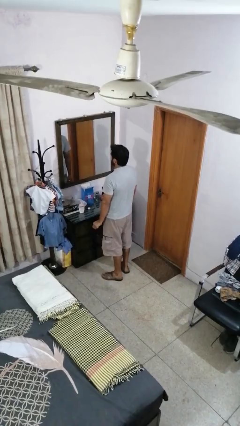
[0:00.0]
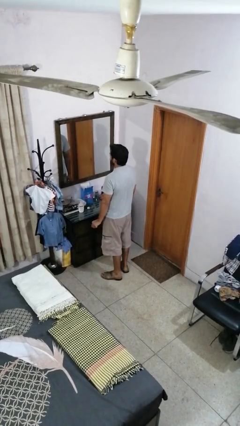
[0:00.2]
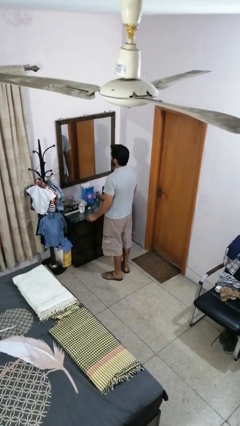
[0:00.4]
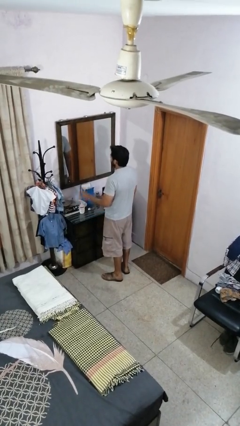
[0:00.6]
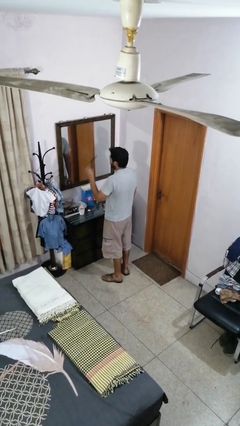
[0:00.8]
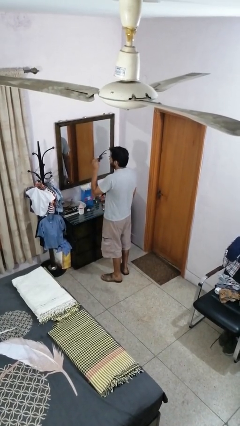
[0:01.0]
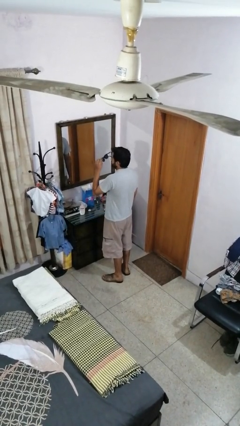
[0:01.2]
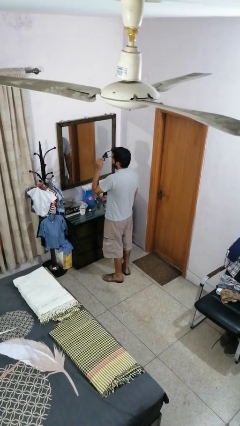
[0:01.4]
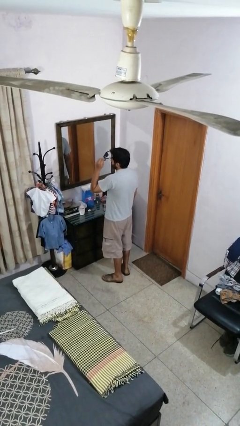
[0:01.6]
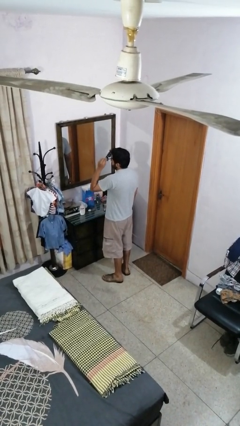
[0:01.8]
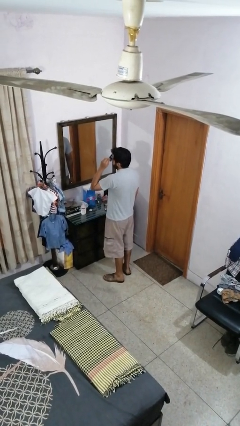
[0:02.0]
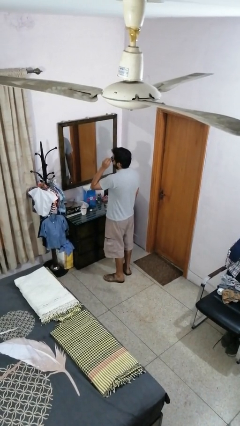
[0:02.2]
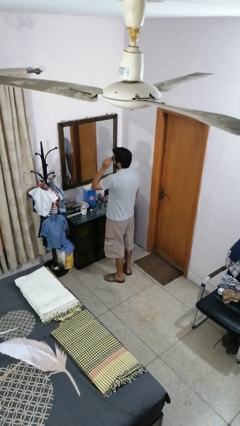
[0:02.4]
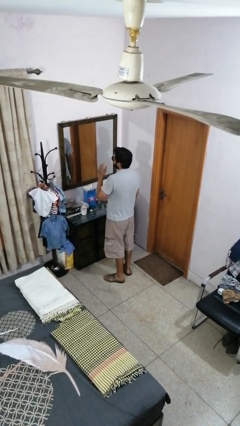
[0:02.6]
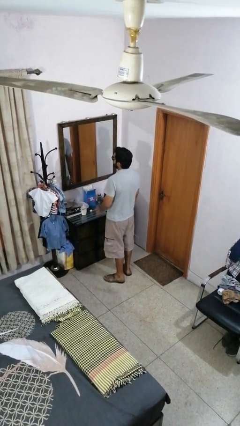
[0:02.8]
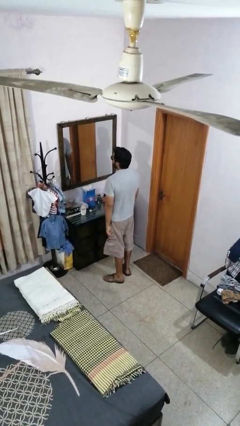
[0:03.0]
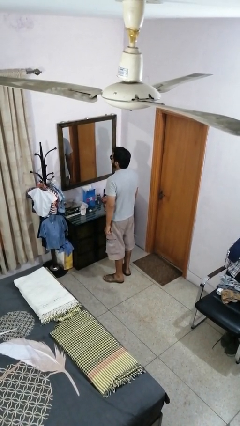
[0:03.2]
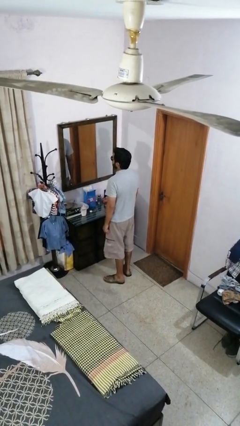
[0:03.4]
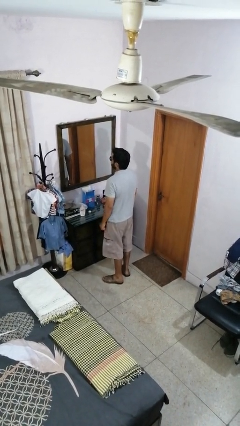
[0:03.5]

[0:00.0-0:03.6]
person puts on sunglasses

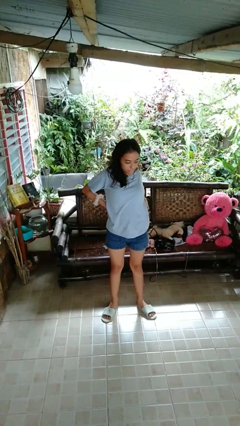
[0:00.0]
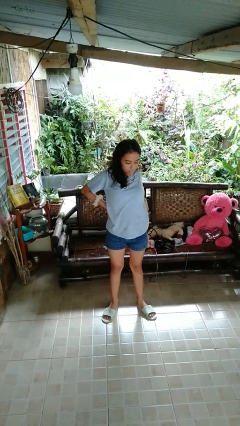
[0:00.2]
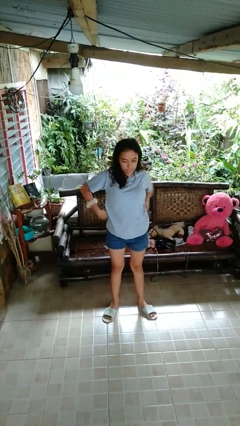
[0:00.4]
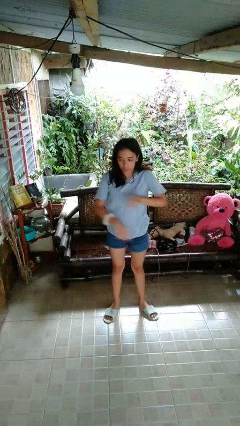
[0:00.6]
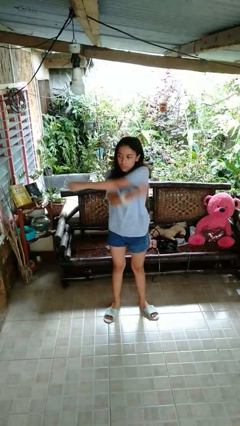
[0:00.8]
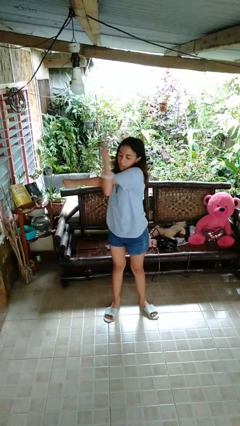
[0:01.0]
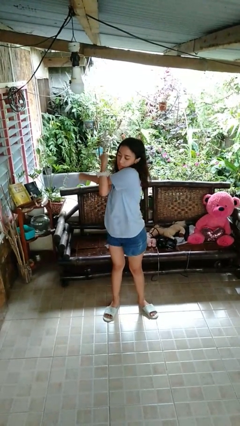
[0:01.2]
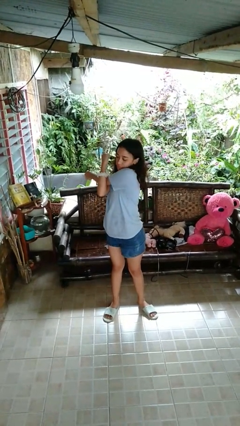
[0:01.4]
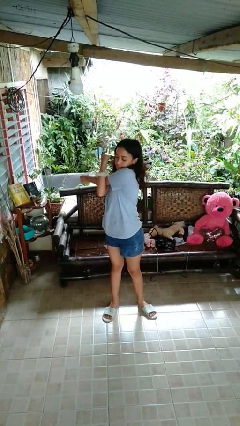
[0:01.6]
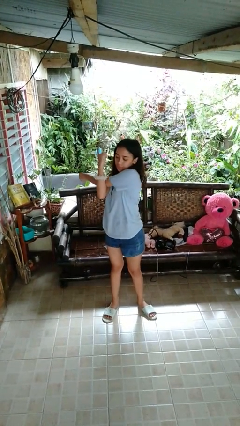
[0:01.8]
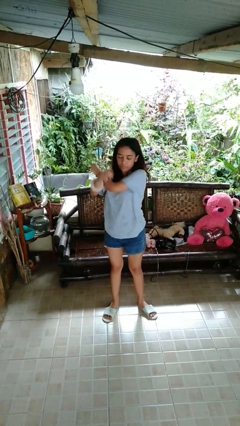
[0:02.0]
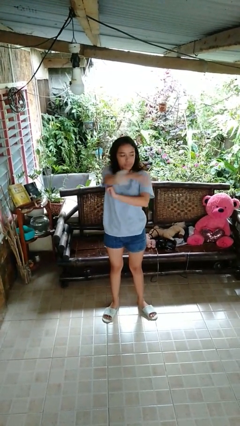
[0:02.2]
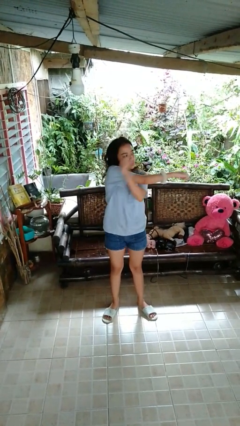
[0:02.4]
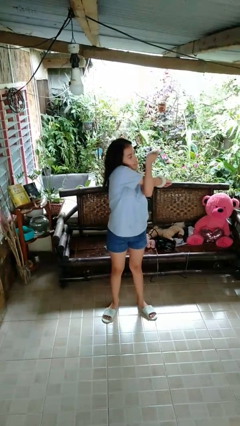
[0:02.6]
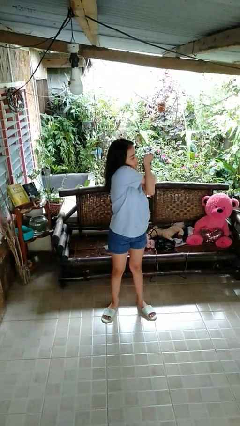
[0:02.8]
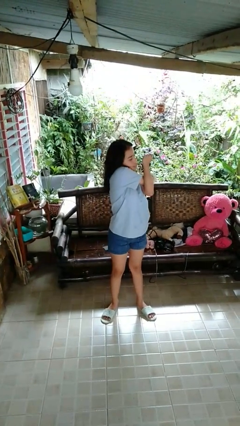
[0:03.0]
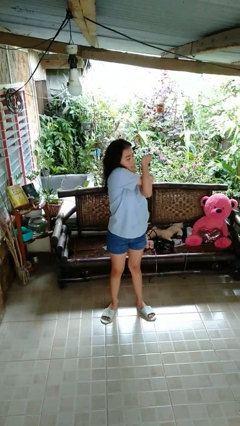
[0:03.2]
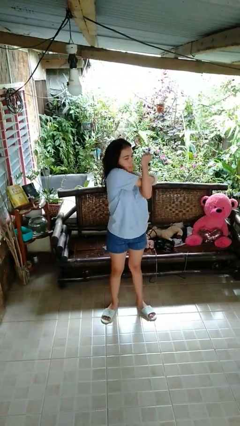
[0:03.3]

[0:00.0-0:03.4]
person stretches arms to side

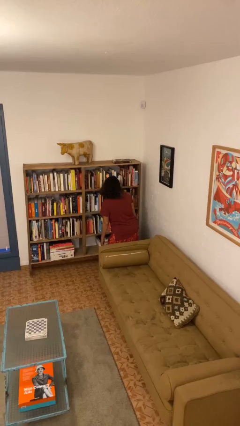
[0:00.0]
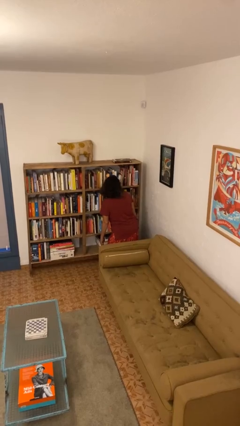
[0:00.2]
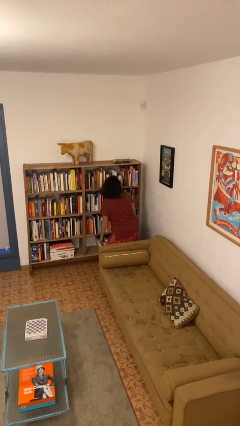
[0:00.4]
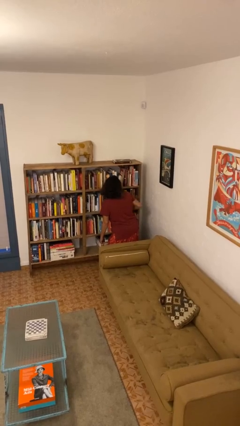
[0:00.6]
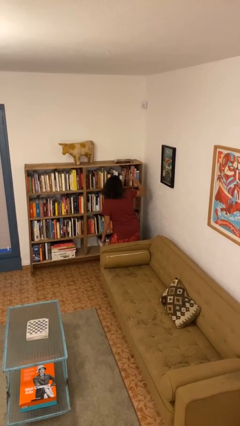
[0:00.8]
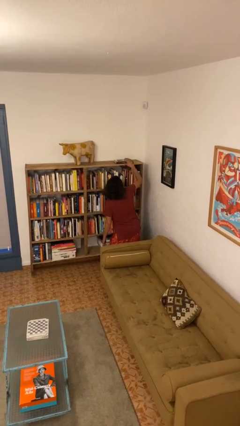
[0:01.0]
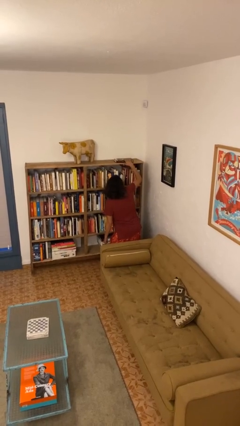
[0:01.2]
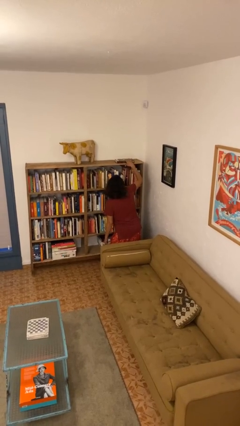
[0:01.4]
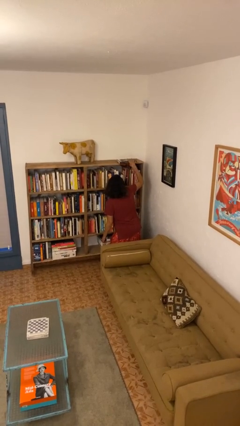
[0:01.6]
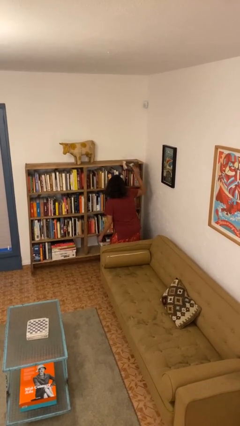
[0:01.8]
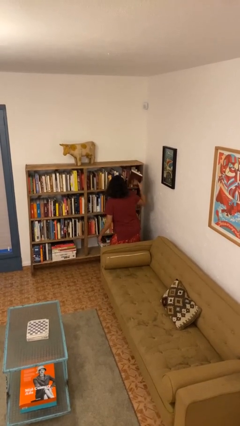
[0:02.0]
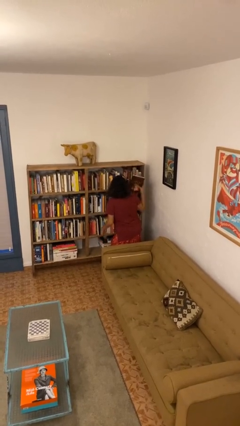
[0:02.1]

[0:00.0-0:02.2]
person picks up object from shelf

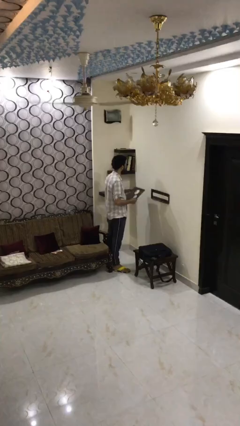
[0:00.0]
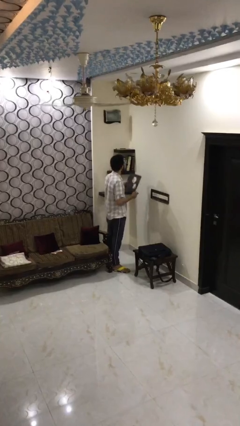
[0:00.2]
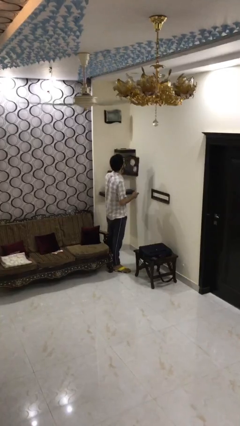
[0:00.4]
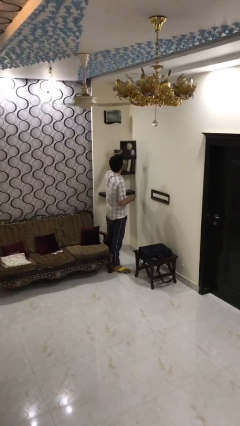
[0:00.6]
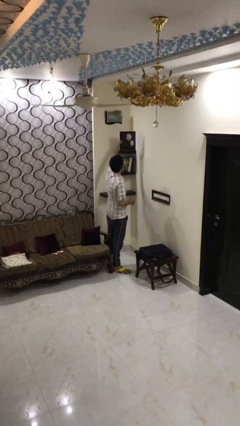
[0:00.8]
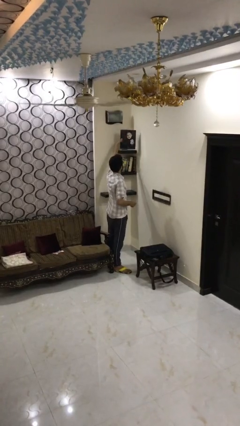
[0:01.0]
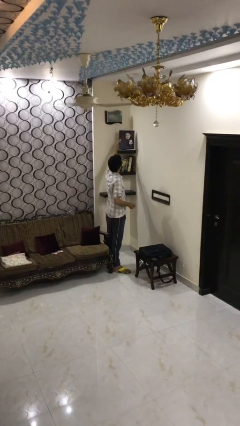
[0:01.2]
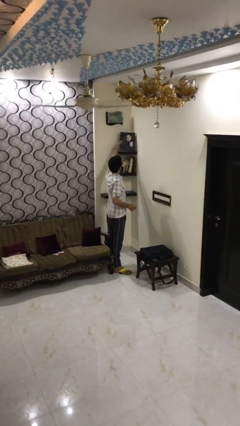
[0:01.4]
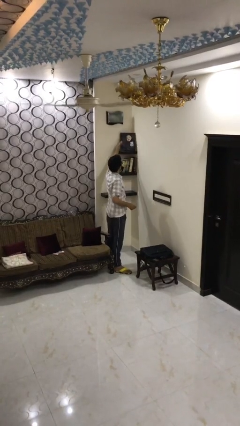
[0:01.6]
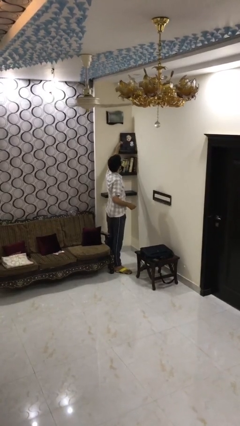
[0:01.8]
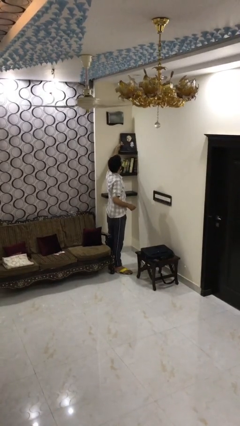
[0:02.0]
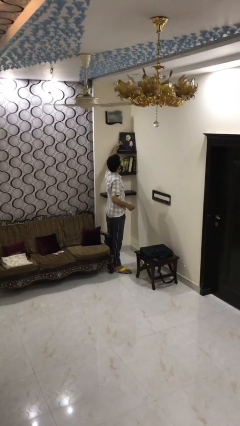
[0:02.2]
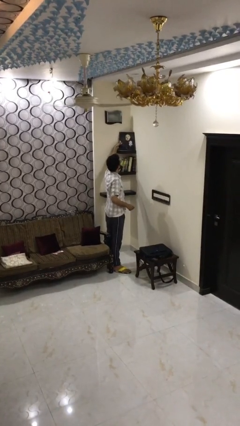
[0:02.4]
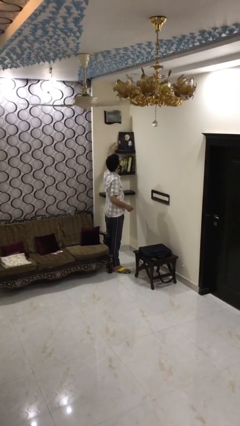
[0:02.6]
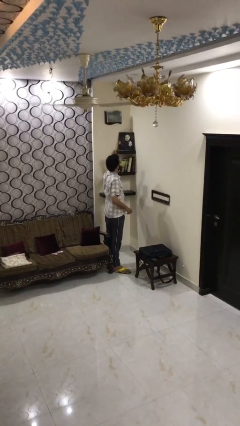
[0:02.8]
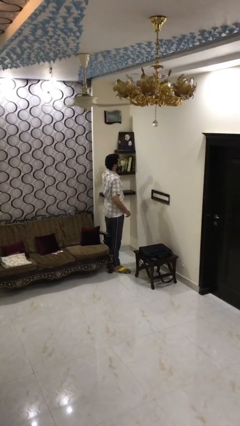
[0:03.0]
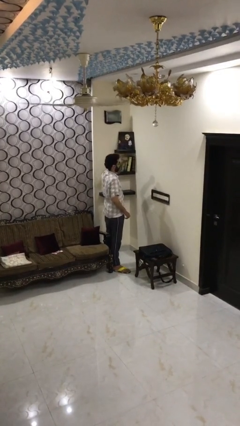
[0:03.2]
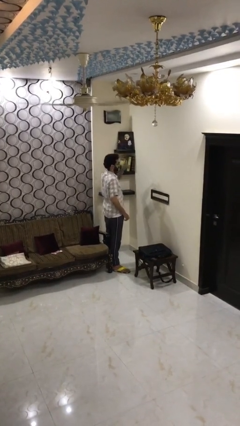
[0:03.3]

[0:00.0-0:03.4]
person puts down object on shelf

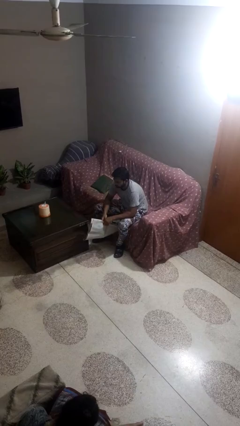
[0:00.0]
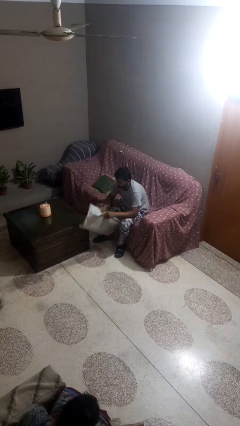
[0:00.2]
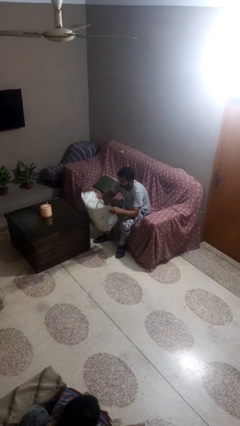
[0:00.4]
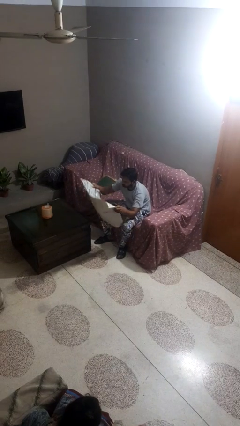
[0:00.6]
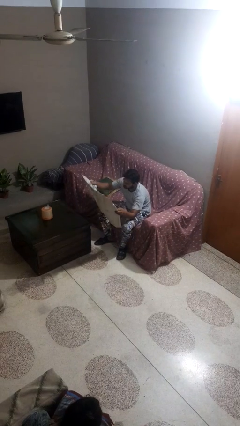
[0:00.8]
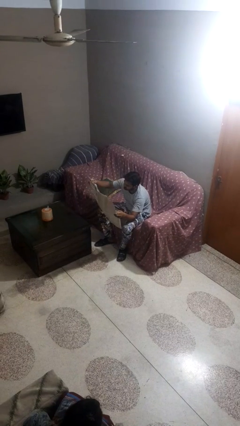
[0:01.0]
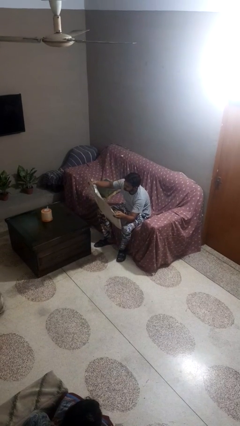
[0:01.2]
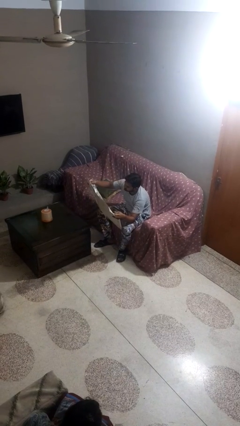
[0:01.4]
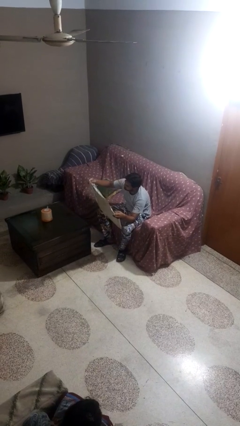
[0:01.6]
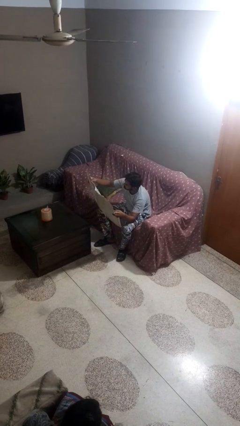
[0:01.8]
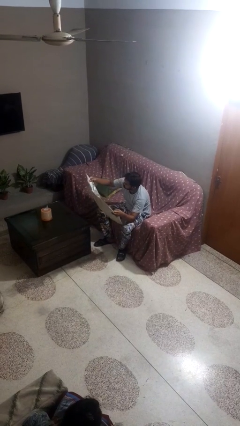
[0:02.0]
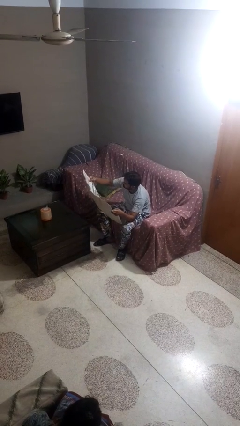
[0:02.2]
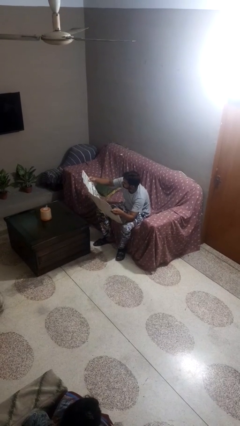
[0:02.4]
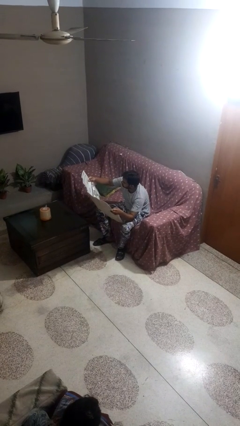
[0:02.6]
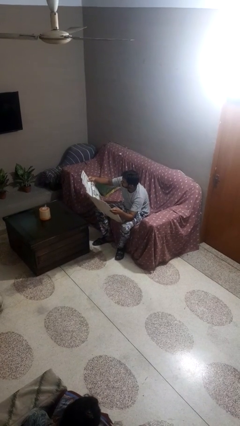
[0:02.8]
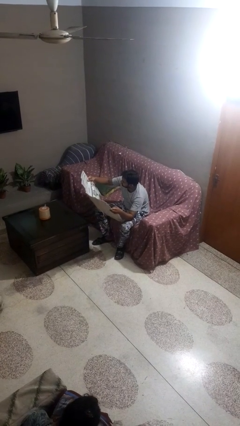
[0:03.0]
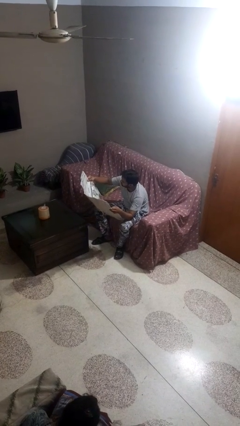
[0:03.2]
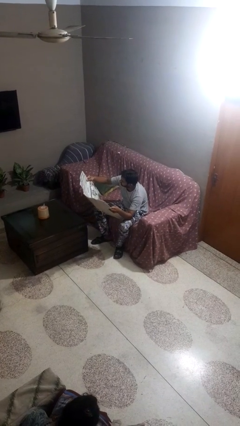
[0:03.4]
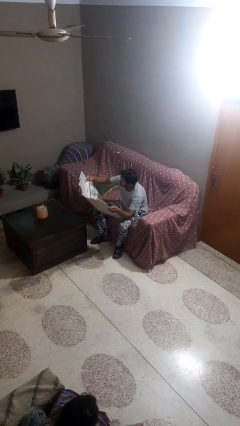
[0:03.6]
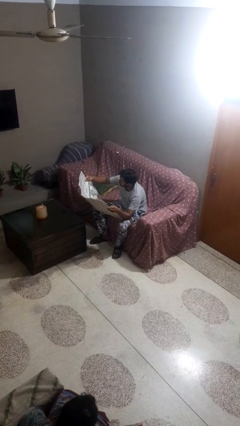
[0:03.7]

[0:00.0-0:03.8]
person reads newspaper

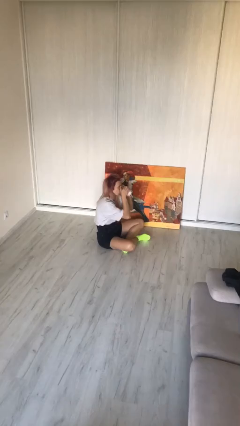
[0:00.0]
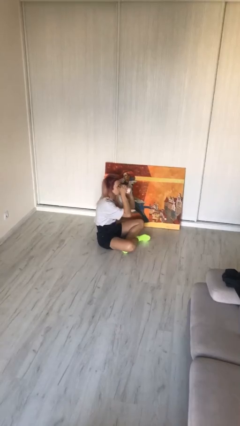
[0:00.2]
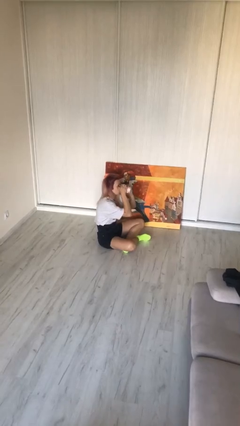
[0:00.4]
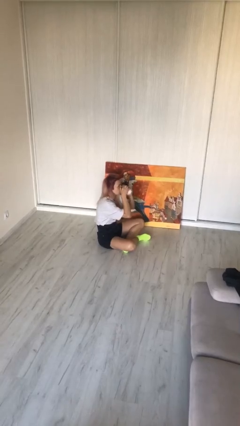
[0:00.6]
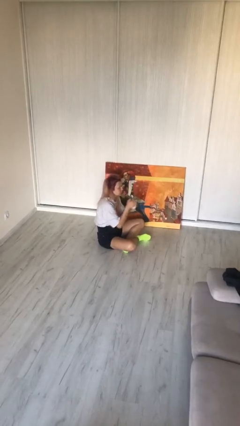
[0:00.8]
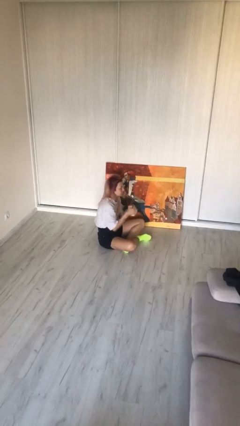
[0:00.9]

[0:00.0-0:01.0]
person drinks from mug
